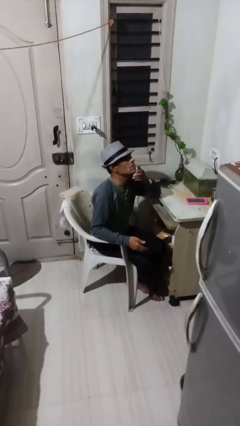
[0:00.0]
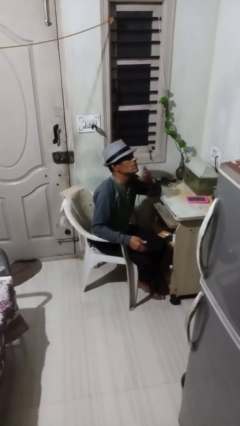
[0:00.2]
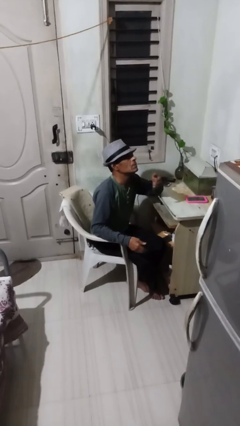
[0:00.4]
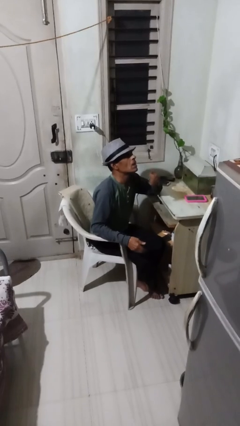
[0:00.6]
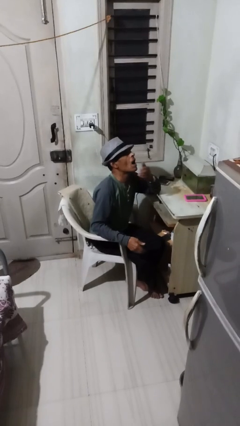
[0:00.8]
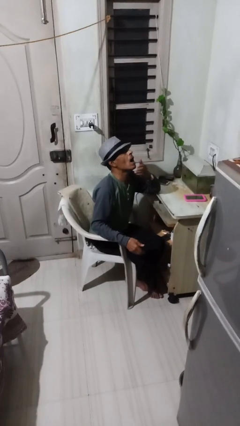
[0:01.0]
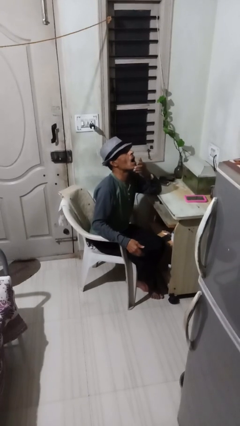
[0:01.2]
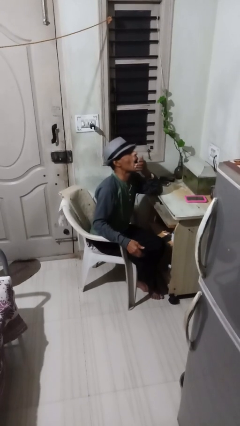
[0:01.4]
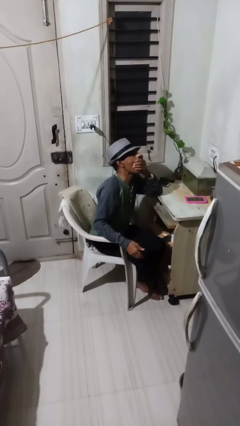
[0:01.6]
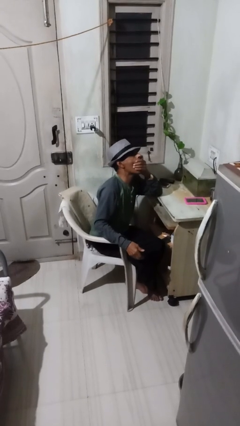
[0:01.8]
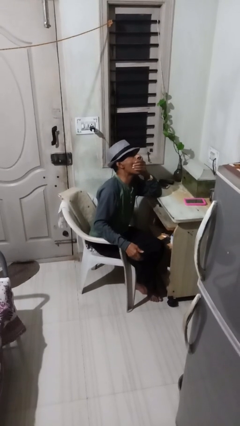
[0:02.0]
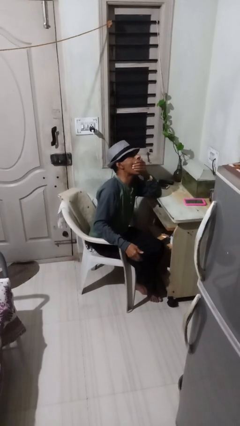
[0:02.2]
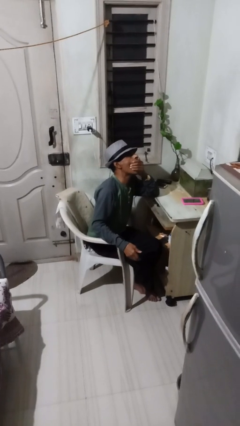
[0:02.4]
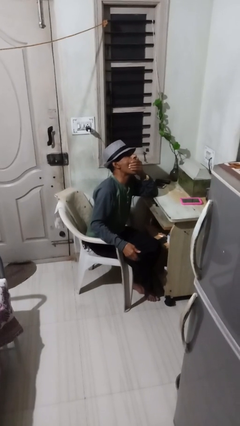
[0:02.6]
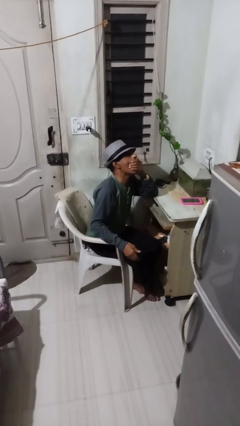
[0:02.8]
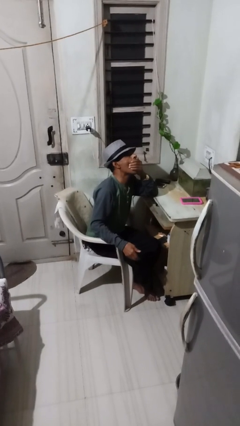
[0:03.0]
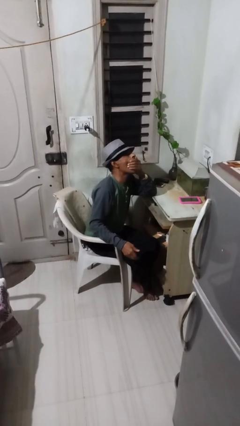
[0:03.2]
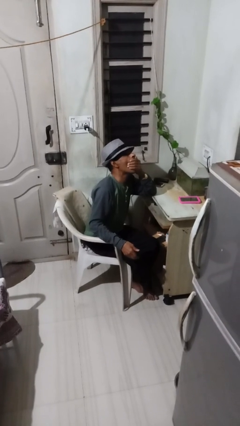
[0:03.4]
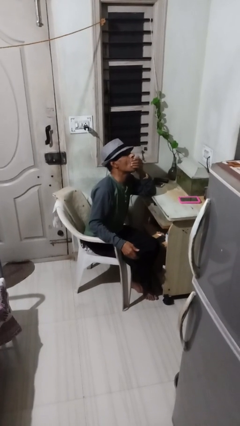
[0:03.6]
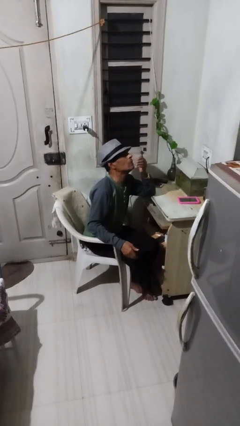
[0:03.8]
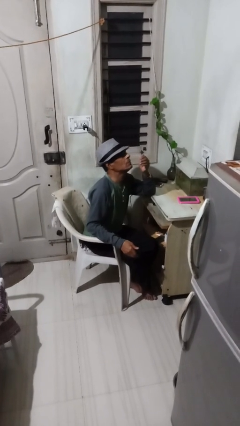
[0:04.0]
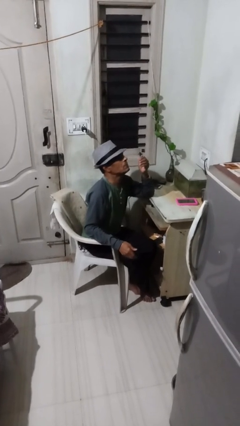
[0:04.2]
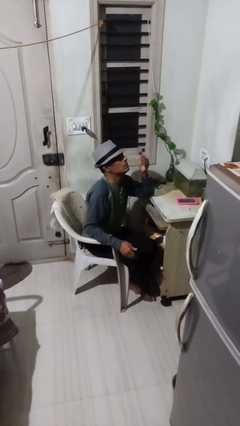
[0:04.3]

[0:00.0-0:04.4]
person yawns

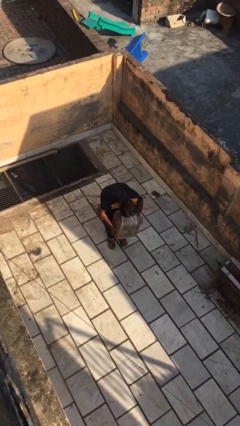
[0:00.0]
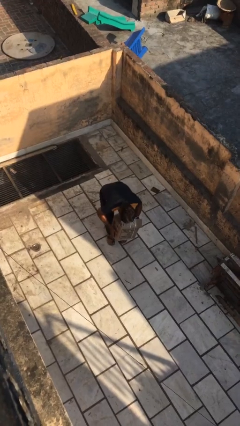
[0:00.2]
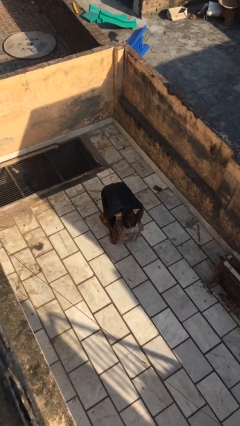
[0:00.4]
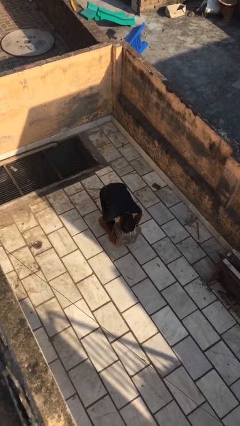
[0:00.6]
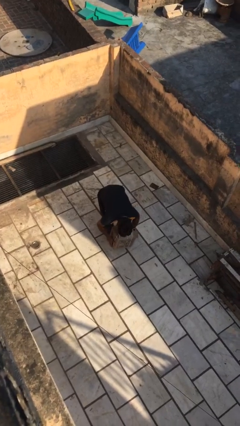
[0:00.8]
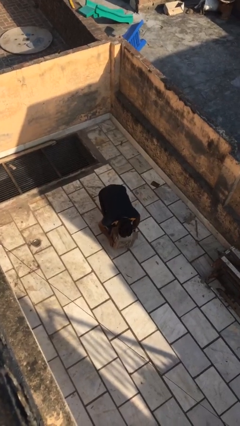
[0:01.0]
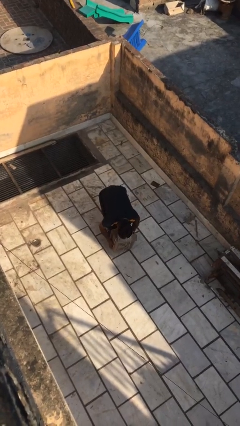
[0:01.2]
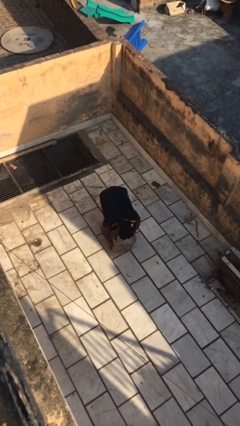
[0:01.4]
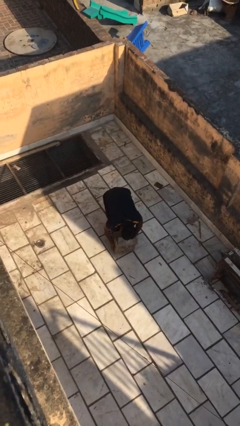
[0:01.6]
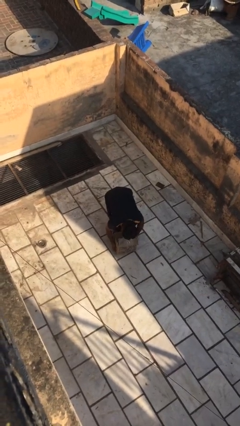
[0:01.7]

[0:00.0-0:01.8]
person puts down object on floor

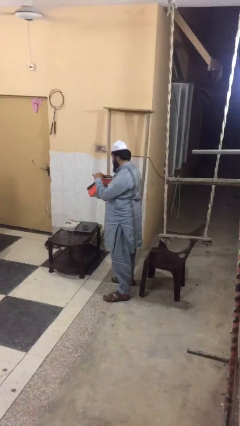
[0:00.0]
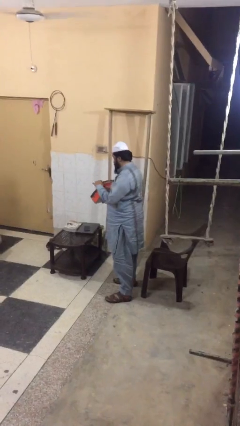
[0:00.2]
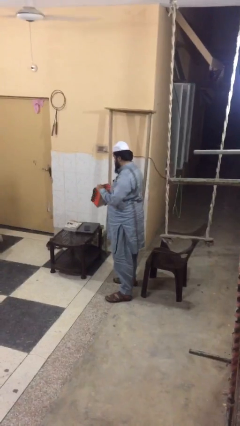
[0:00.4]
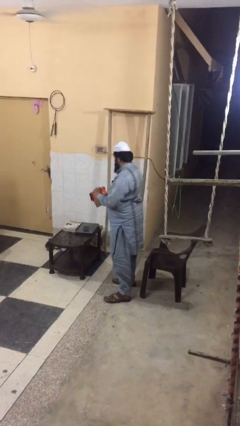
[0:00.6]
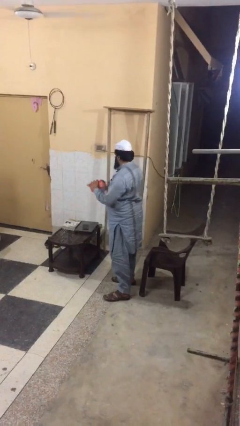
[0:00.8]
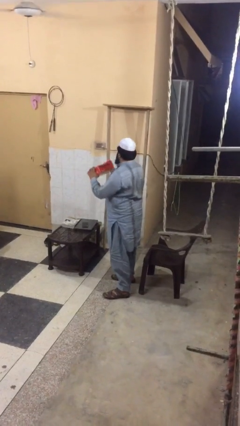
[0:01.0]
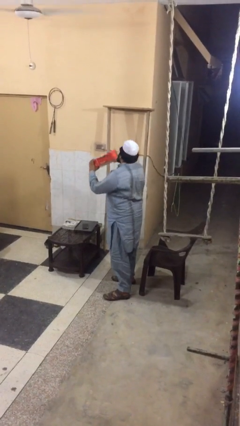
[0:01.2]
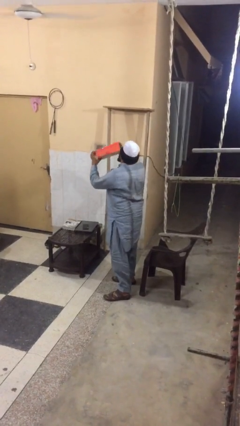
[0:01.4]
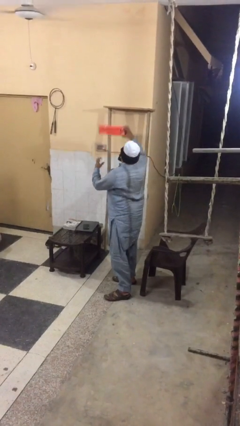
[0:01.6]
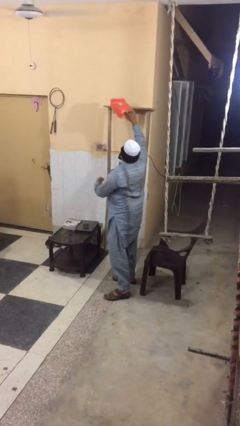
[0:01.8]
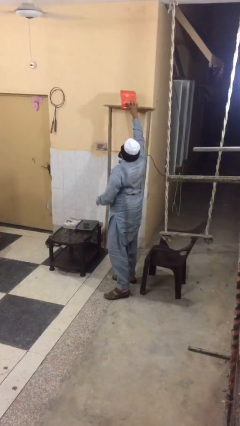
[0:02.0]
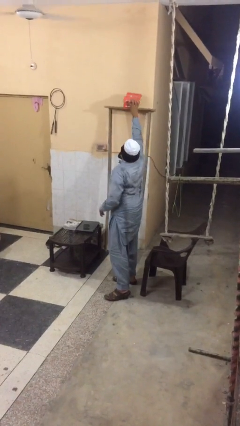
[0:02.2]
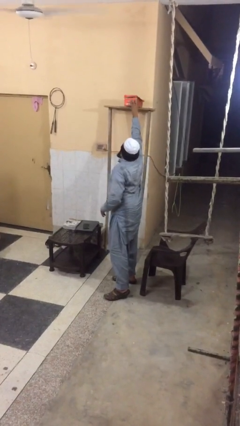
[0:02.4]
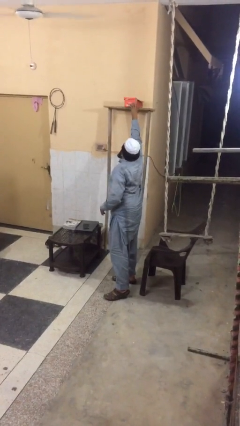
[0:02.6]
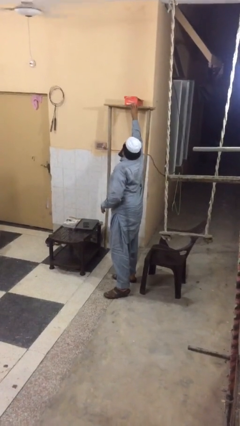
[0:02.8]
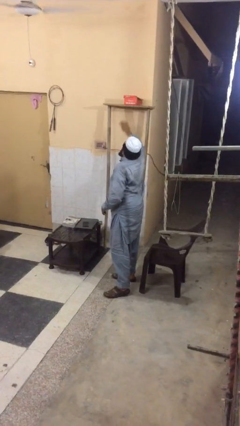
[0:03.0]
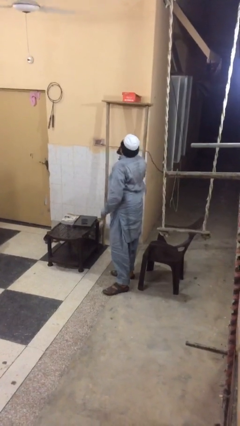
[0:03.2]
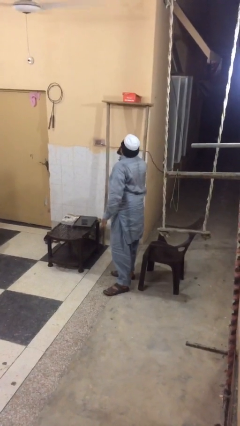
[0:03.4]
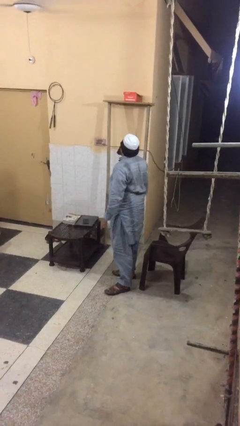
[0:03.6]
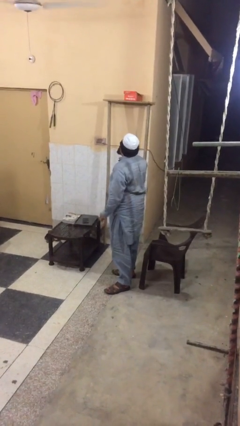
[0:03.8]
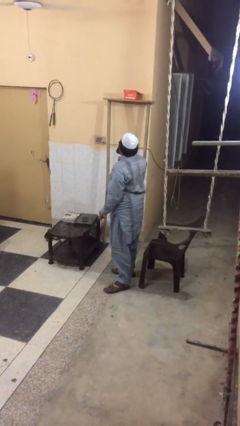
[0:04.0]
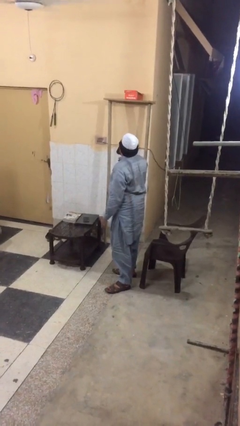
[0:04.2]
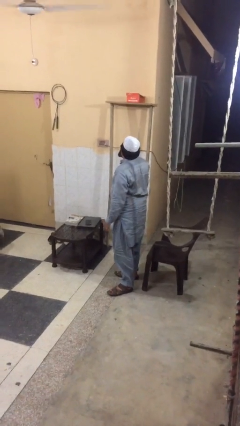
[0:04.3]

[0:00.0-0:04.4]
person puts down object on shelf

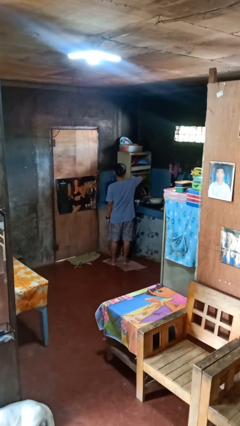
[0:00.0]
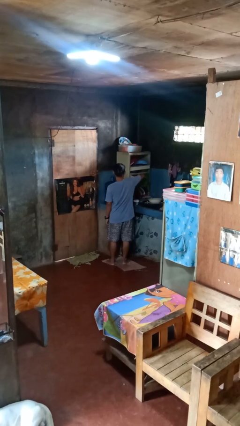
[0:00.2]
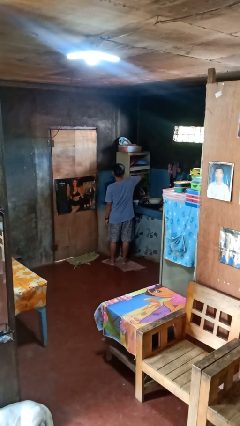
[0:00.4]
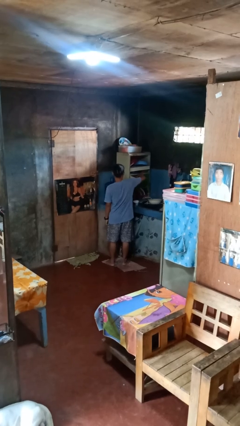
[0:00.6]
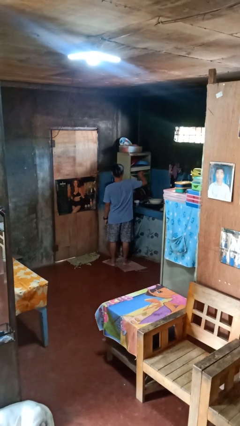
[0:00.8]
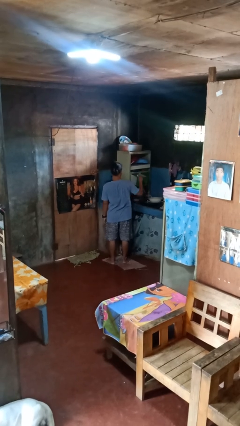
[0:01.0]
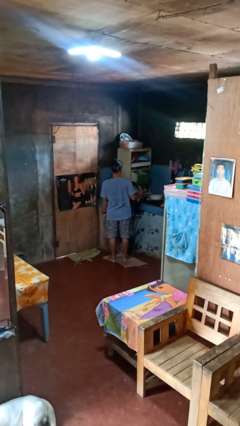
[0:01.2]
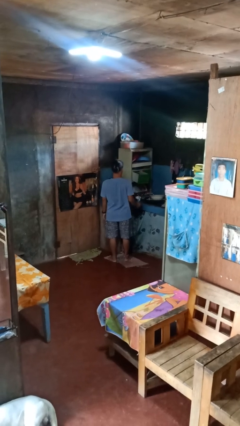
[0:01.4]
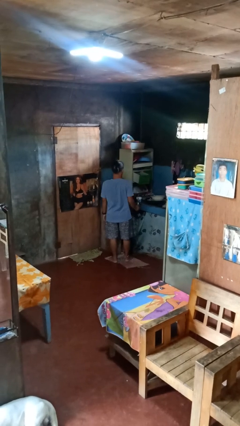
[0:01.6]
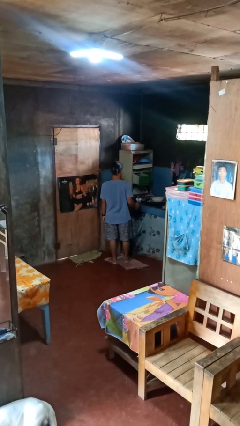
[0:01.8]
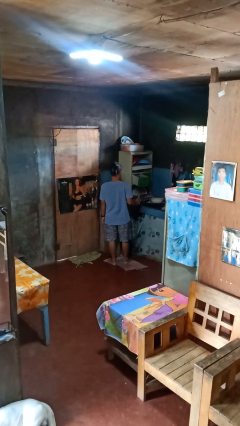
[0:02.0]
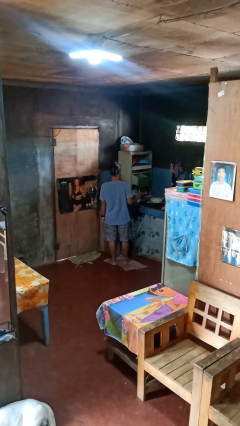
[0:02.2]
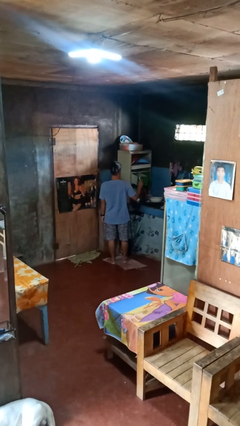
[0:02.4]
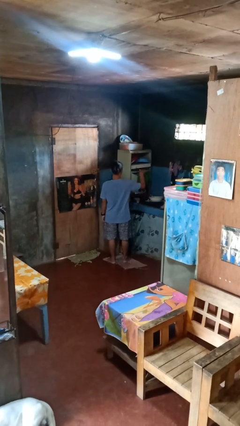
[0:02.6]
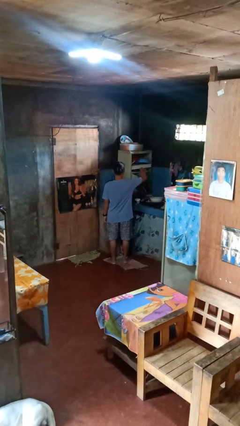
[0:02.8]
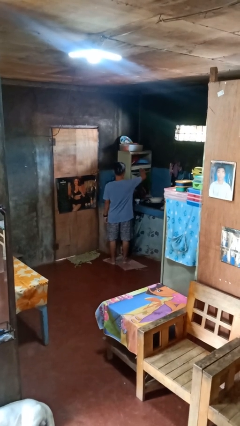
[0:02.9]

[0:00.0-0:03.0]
person takes object from kitchen drawer

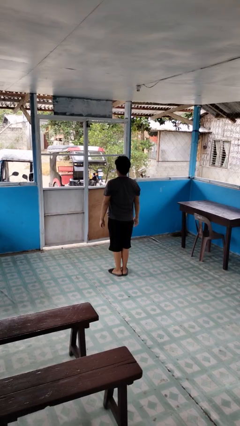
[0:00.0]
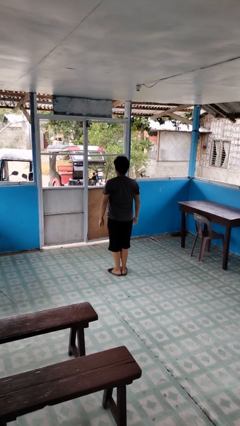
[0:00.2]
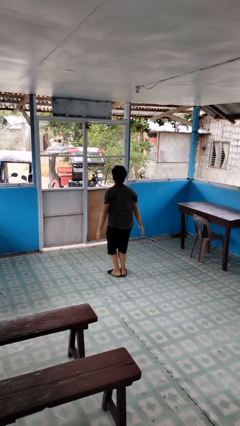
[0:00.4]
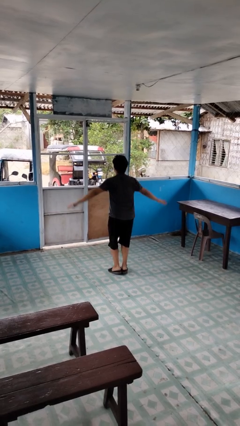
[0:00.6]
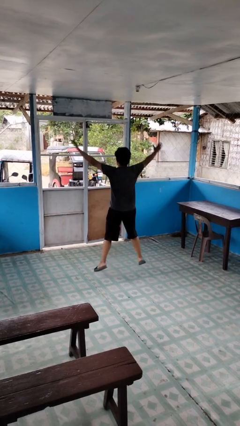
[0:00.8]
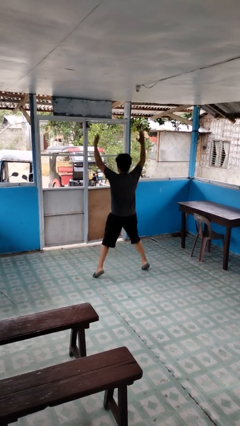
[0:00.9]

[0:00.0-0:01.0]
person exercises with jumping jacks

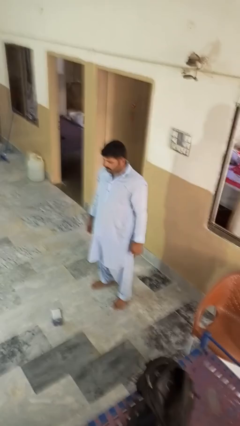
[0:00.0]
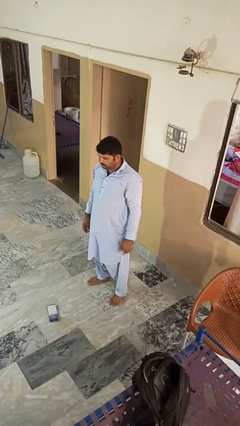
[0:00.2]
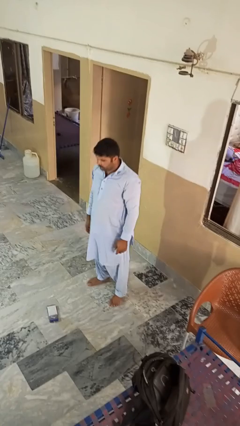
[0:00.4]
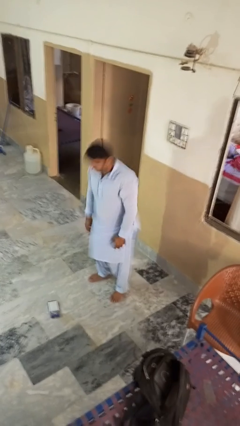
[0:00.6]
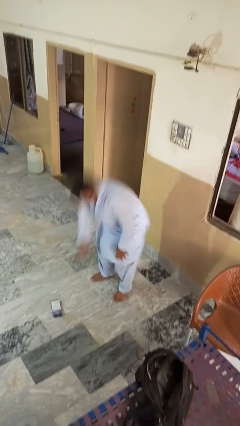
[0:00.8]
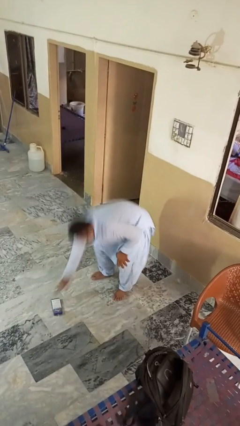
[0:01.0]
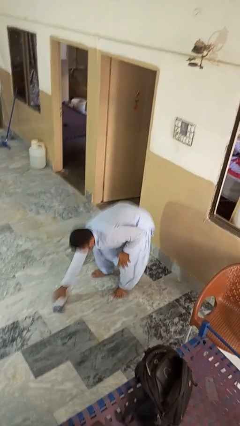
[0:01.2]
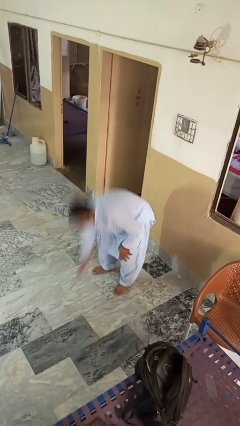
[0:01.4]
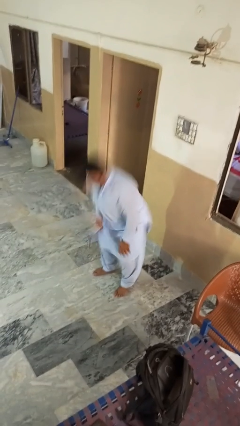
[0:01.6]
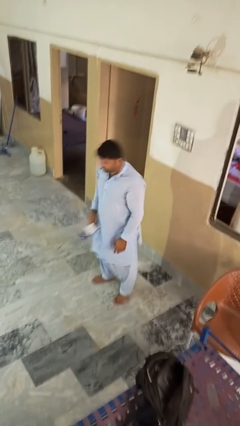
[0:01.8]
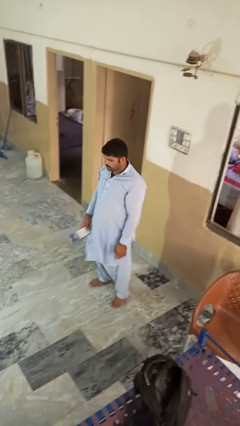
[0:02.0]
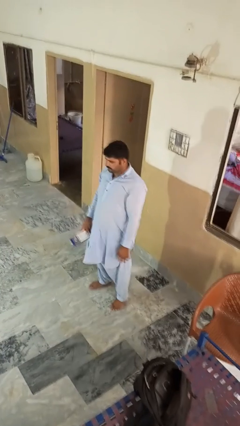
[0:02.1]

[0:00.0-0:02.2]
person picks up object from floor

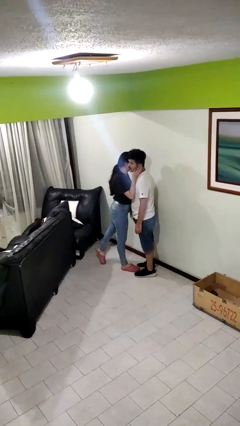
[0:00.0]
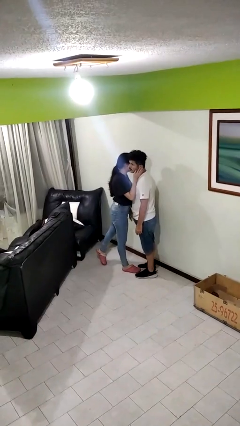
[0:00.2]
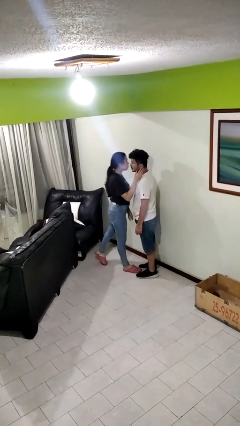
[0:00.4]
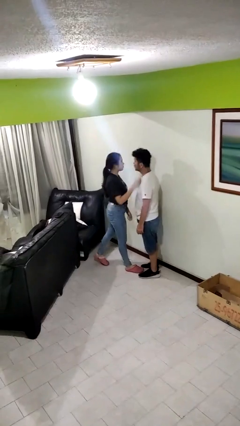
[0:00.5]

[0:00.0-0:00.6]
person kisses cheek of person
